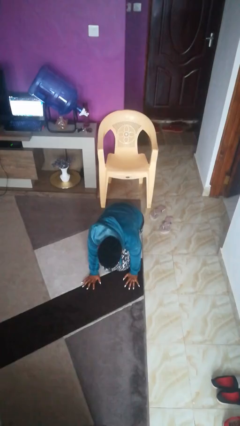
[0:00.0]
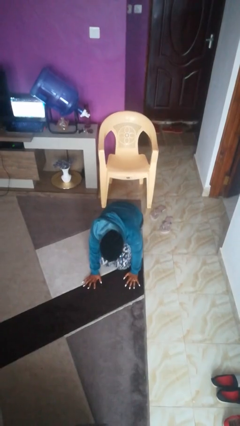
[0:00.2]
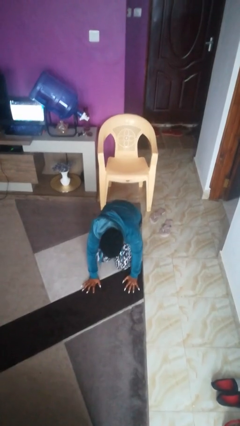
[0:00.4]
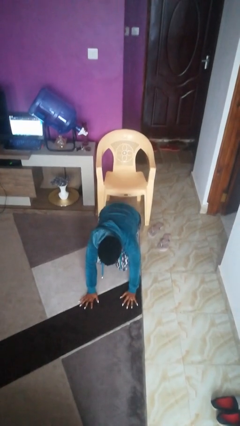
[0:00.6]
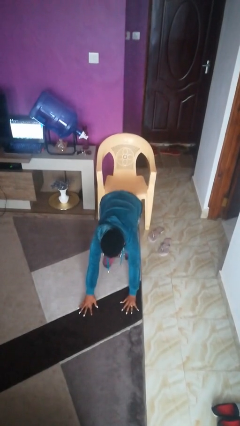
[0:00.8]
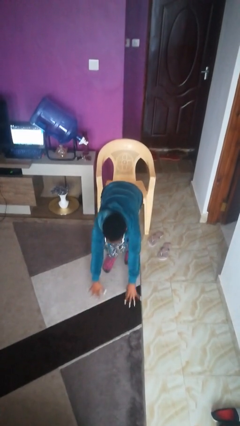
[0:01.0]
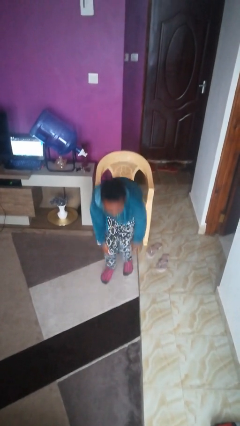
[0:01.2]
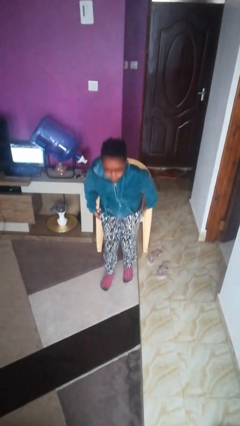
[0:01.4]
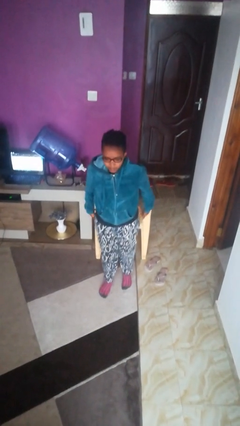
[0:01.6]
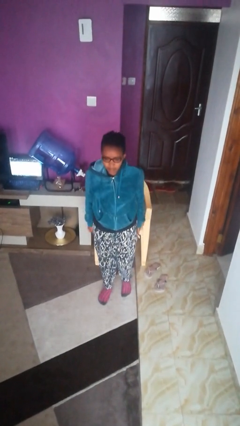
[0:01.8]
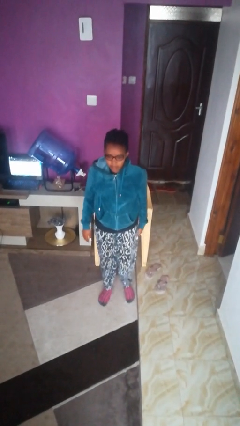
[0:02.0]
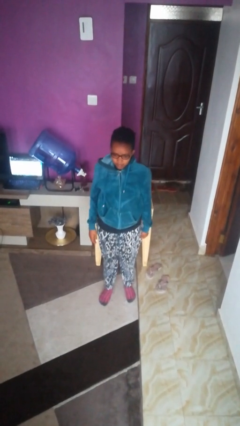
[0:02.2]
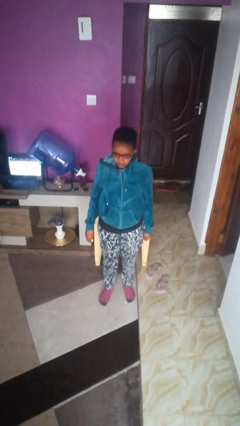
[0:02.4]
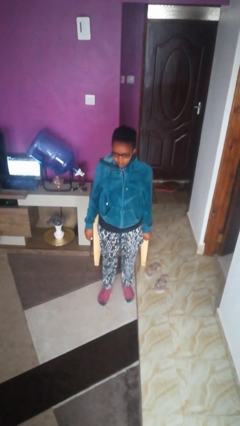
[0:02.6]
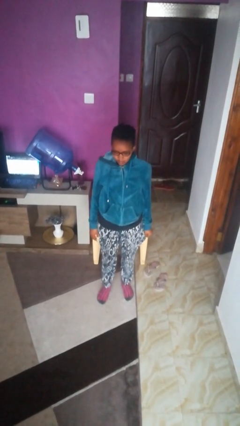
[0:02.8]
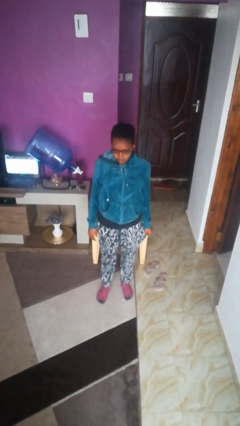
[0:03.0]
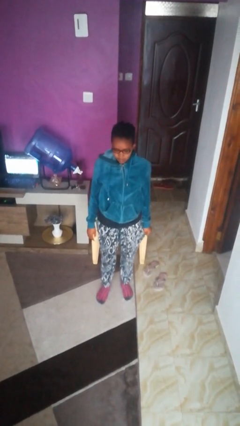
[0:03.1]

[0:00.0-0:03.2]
person stands up from floor

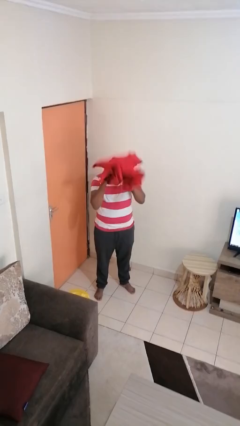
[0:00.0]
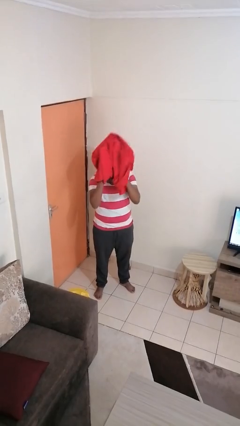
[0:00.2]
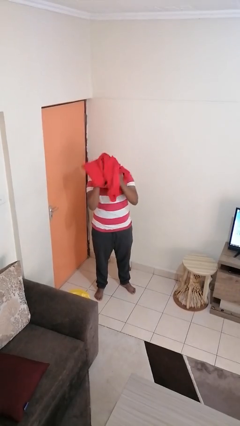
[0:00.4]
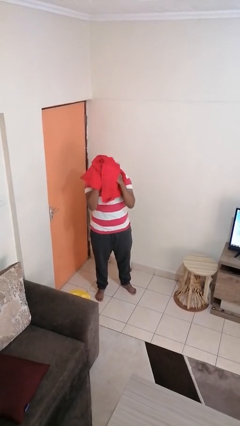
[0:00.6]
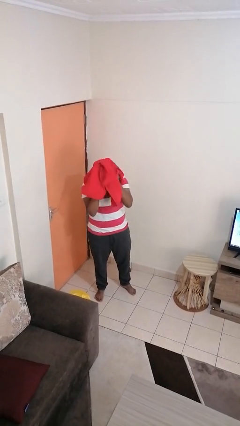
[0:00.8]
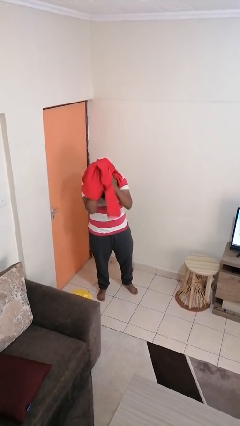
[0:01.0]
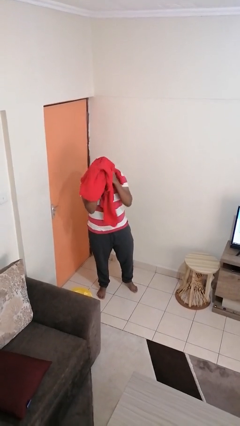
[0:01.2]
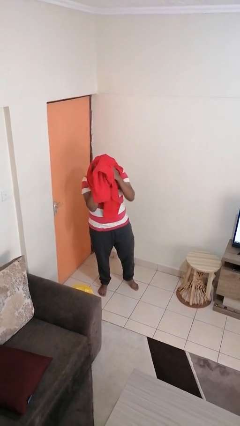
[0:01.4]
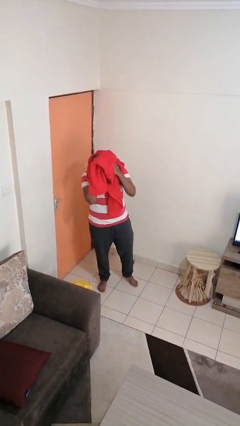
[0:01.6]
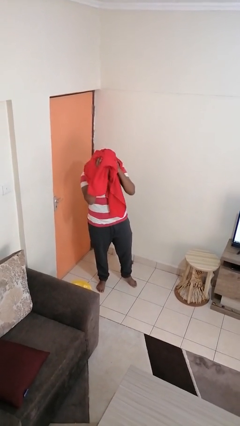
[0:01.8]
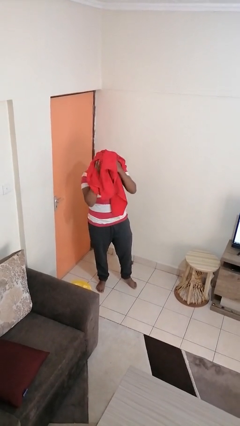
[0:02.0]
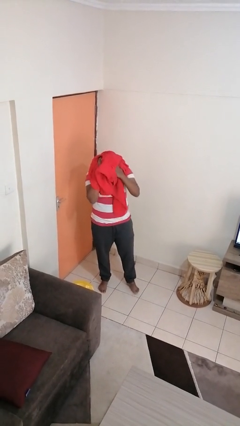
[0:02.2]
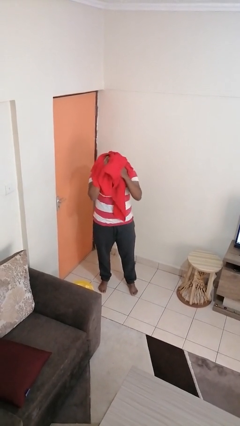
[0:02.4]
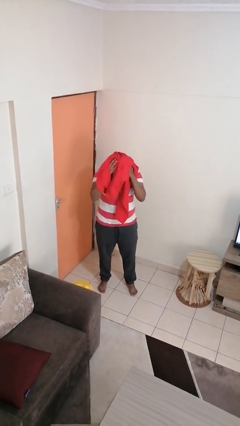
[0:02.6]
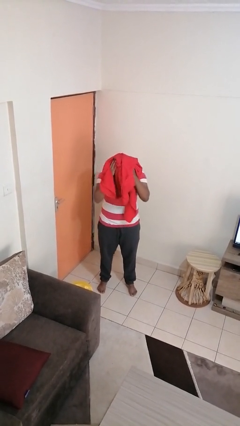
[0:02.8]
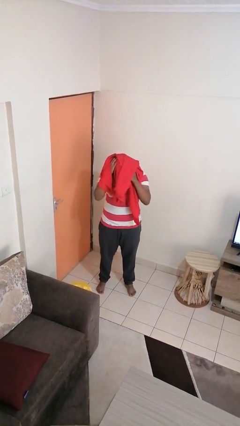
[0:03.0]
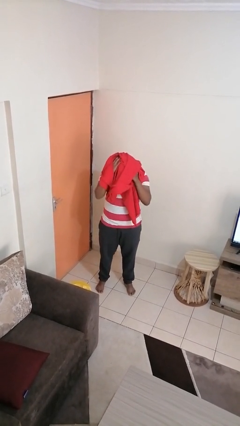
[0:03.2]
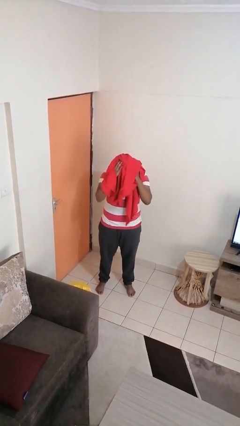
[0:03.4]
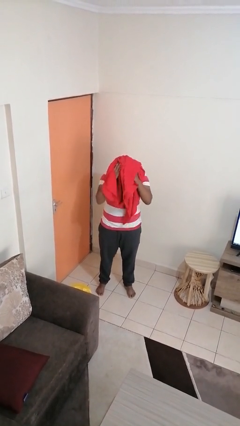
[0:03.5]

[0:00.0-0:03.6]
person dries hair with towel

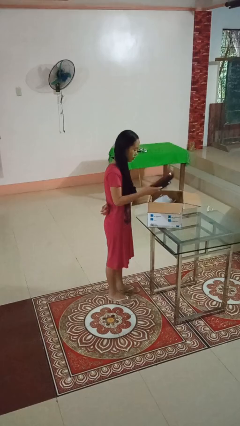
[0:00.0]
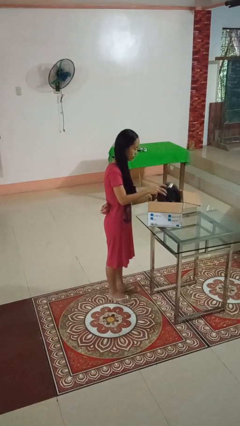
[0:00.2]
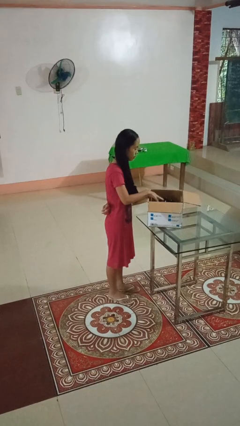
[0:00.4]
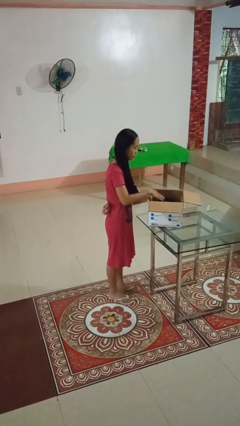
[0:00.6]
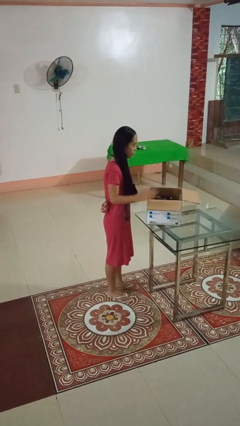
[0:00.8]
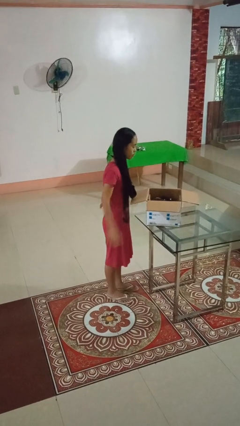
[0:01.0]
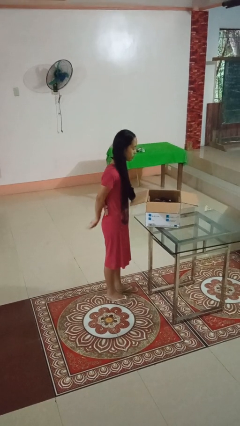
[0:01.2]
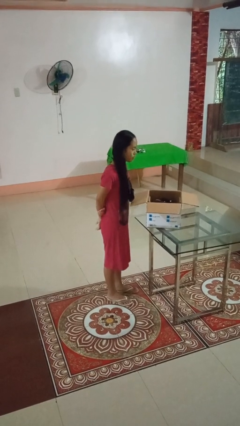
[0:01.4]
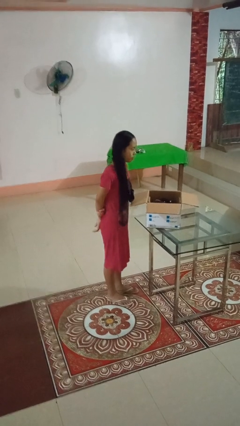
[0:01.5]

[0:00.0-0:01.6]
person puts object into box

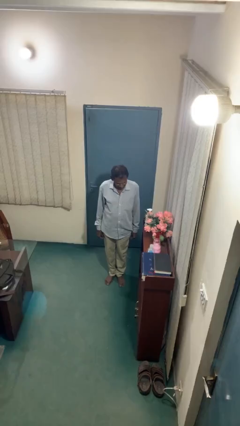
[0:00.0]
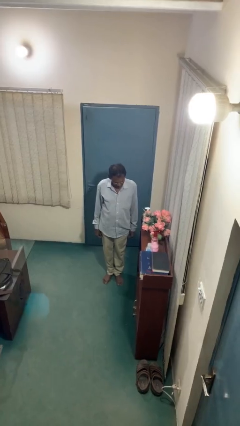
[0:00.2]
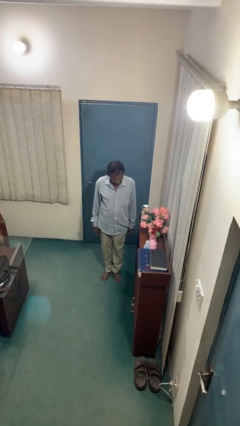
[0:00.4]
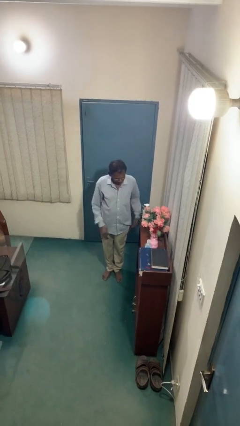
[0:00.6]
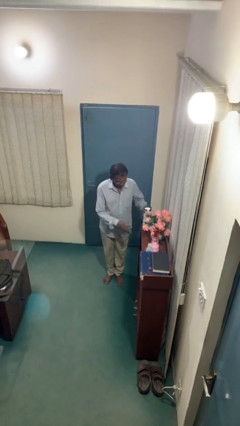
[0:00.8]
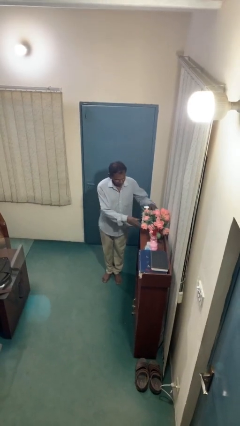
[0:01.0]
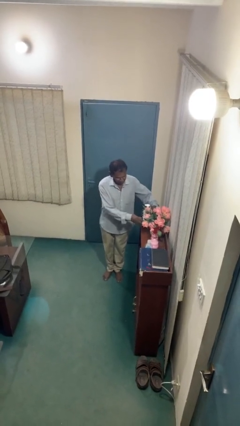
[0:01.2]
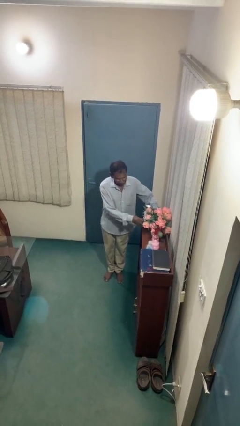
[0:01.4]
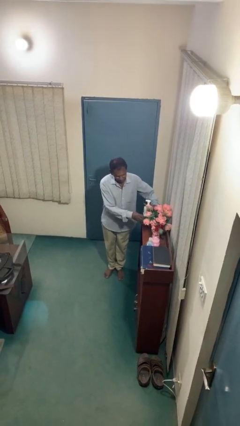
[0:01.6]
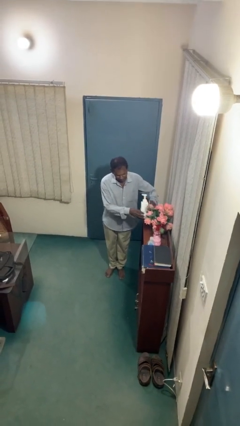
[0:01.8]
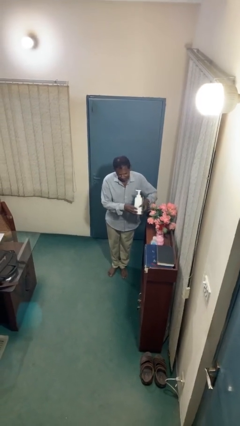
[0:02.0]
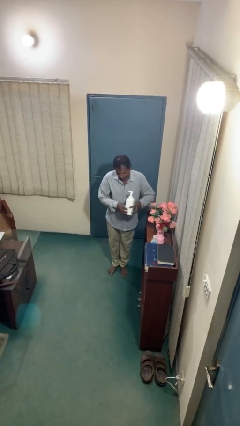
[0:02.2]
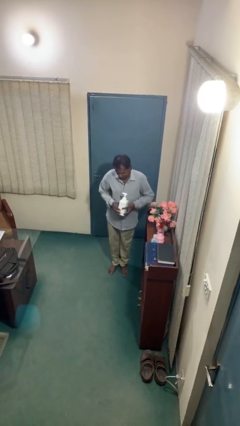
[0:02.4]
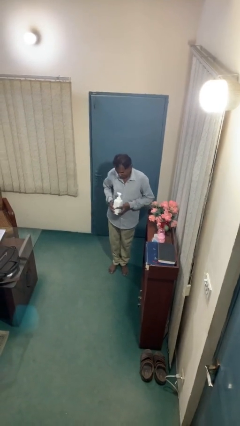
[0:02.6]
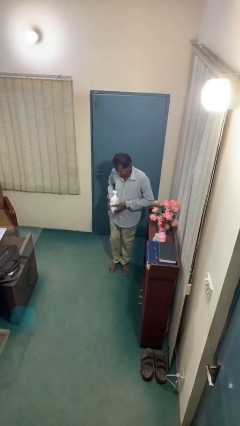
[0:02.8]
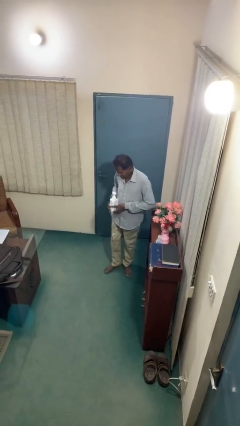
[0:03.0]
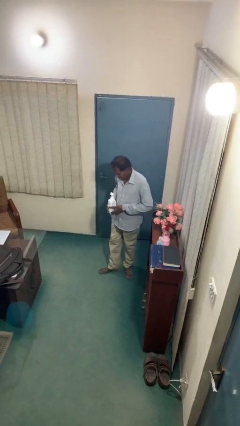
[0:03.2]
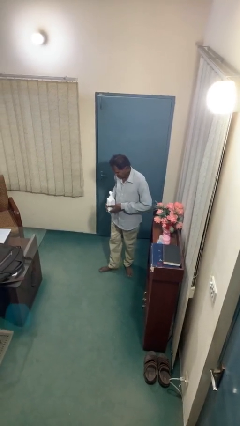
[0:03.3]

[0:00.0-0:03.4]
person picks up object from shelf

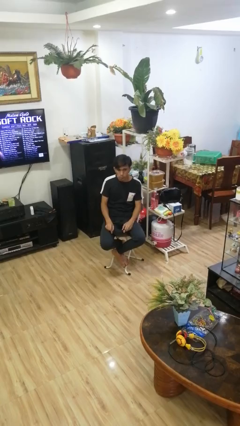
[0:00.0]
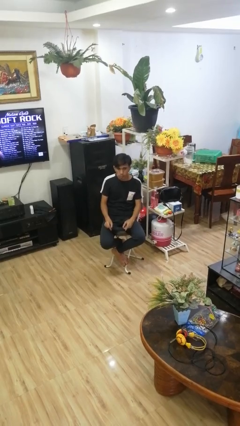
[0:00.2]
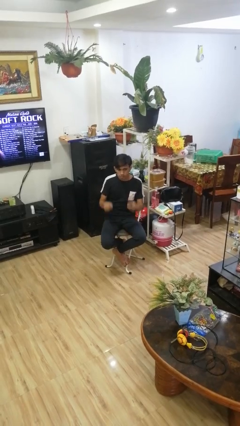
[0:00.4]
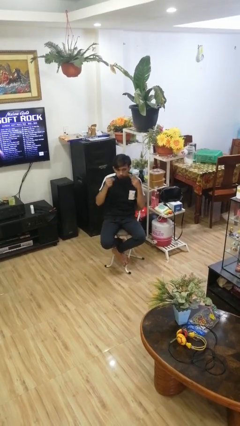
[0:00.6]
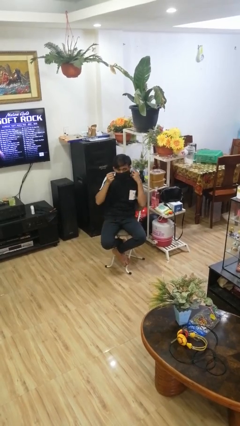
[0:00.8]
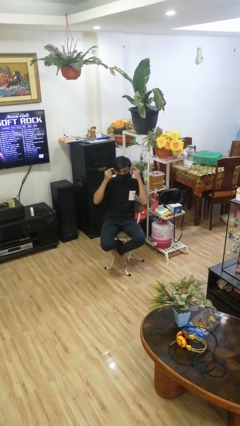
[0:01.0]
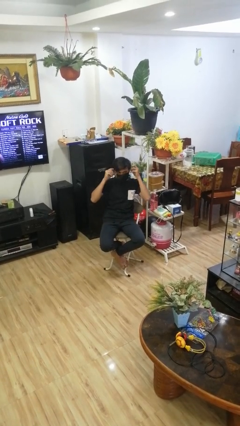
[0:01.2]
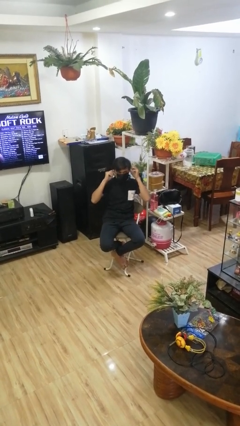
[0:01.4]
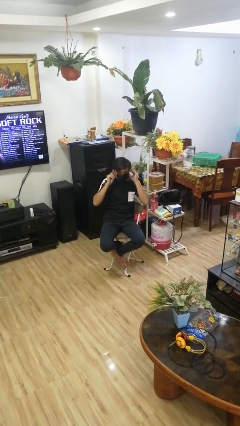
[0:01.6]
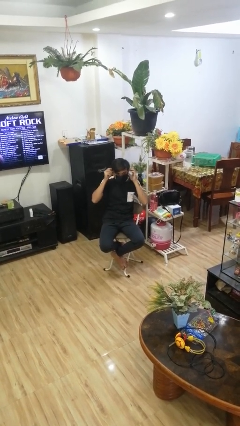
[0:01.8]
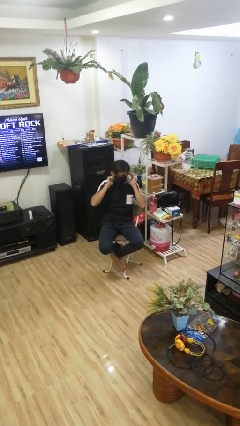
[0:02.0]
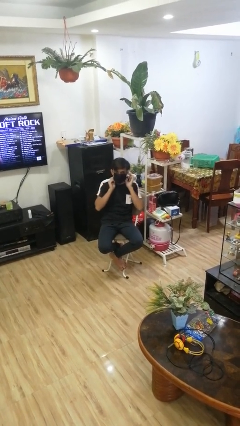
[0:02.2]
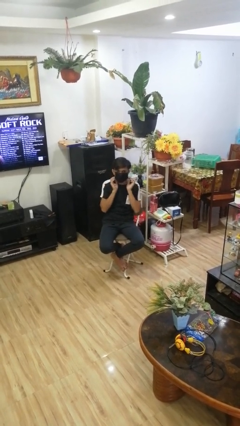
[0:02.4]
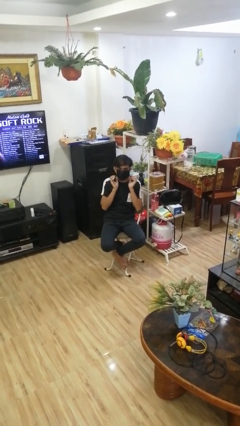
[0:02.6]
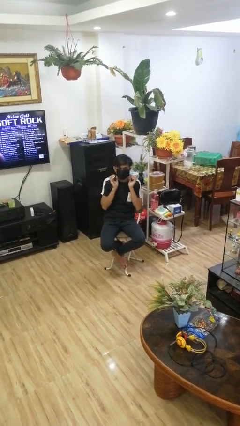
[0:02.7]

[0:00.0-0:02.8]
person puts on facemask

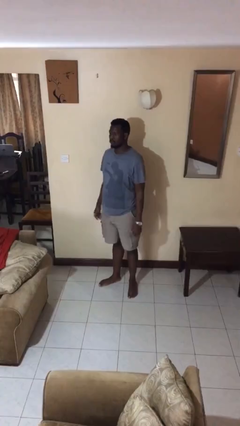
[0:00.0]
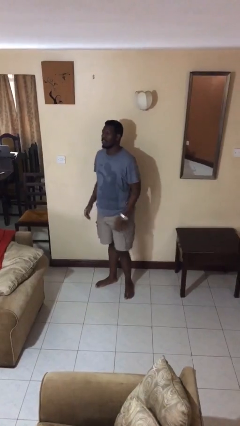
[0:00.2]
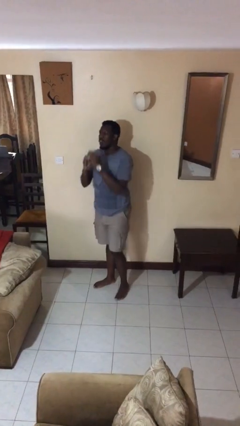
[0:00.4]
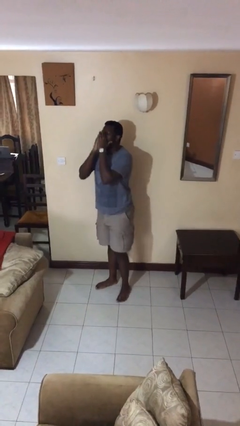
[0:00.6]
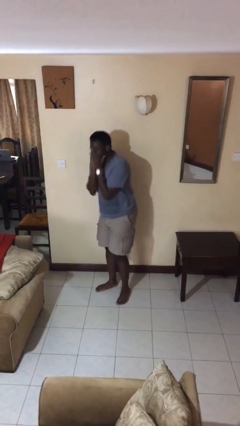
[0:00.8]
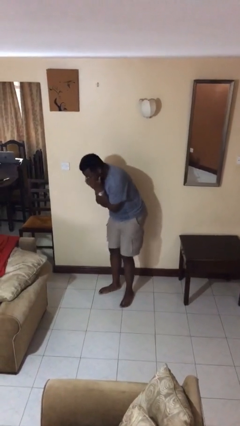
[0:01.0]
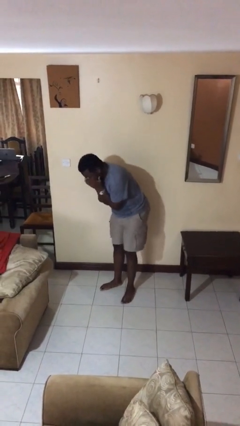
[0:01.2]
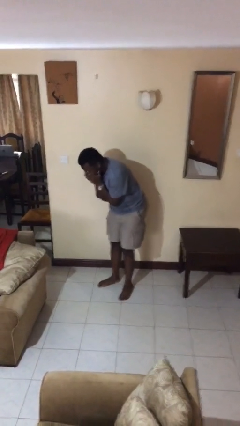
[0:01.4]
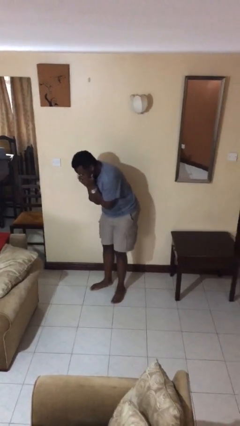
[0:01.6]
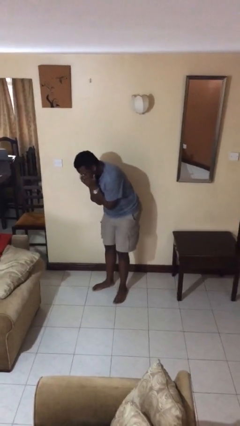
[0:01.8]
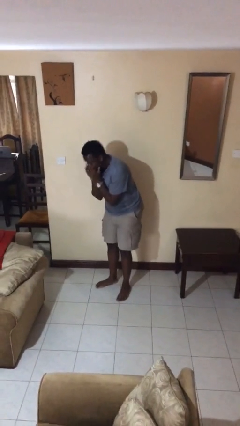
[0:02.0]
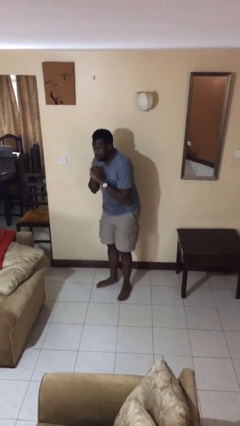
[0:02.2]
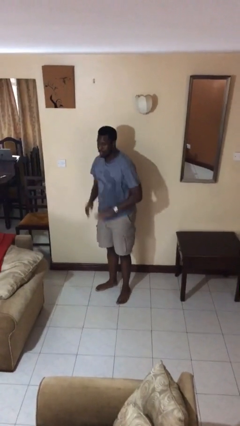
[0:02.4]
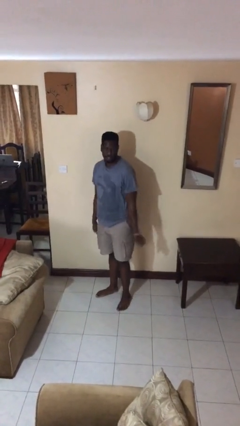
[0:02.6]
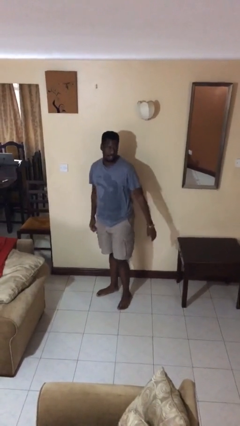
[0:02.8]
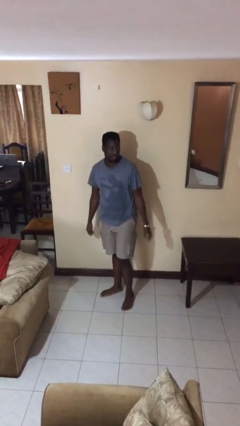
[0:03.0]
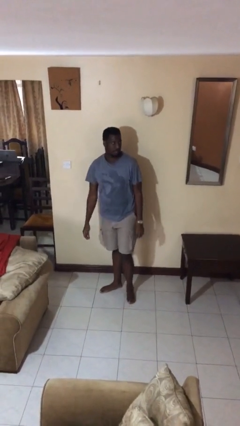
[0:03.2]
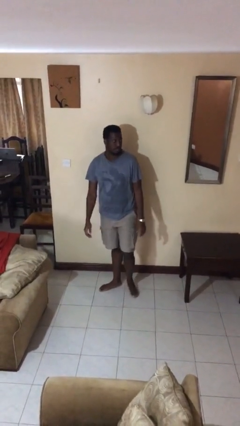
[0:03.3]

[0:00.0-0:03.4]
person sneezes into hand
